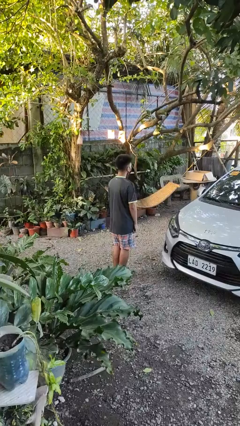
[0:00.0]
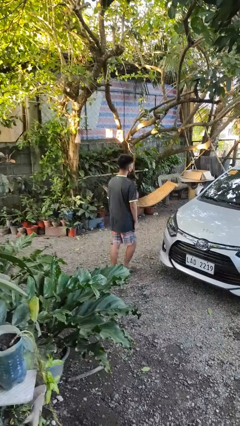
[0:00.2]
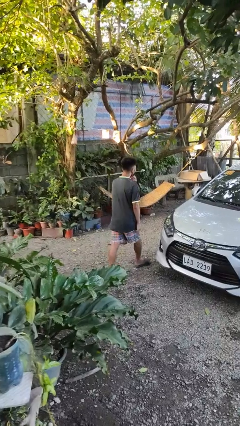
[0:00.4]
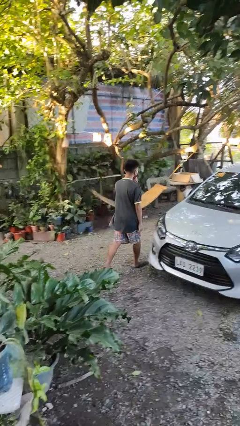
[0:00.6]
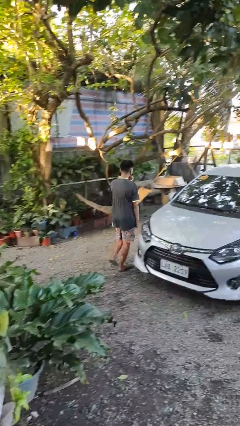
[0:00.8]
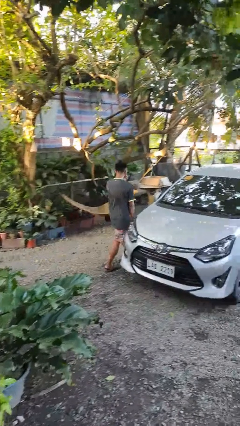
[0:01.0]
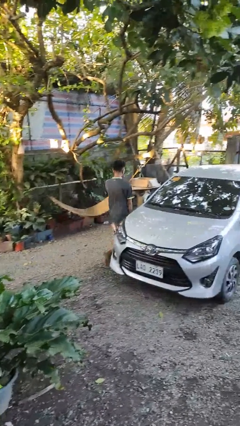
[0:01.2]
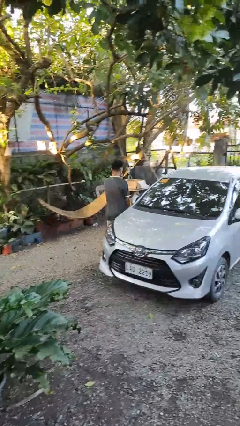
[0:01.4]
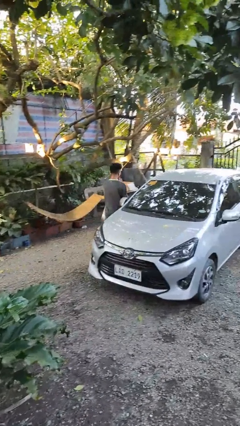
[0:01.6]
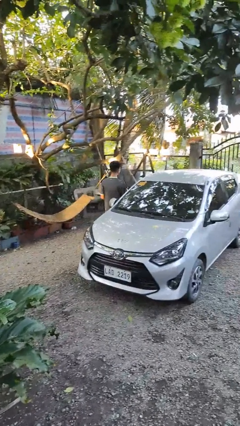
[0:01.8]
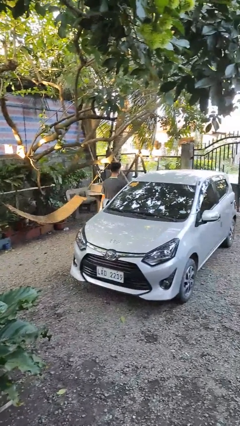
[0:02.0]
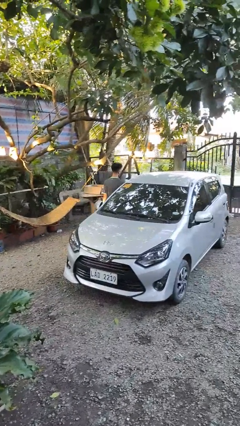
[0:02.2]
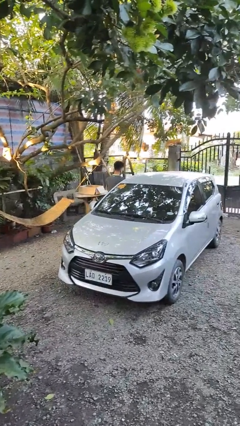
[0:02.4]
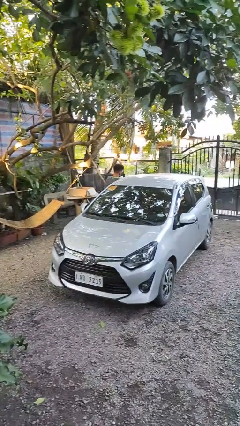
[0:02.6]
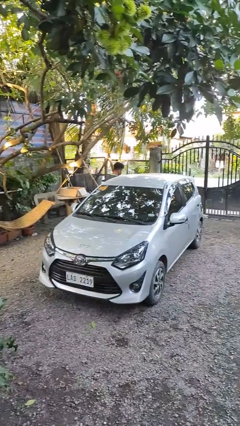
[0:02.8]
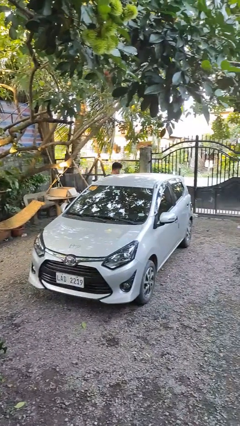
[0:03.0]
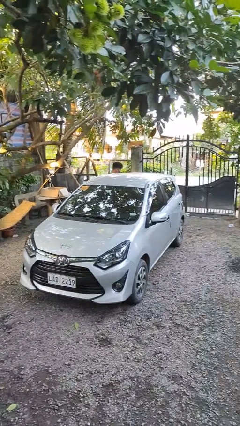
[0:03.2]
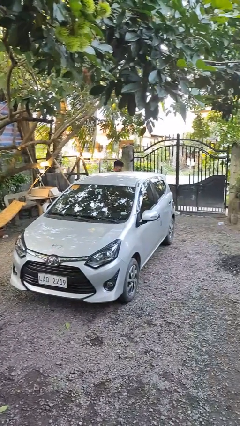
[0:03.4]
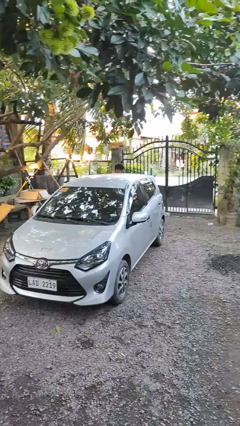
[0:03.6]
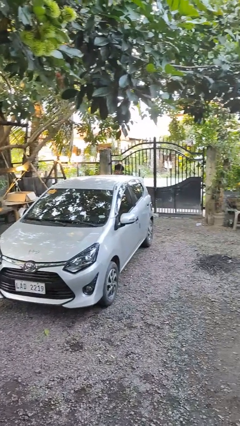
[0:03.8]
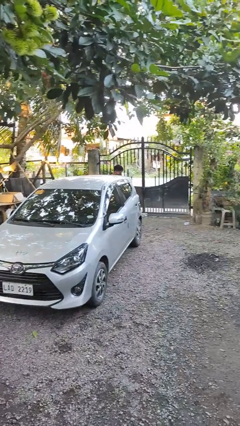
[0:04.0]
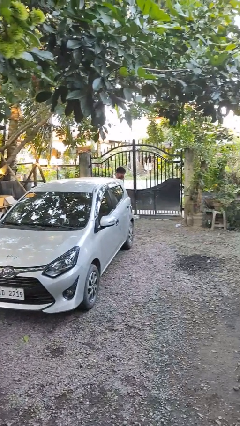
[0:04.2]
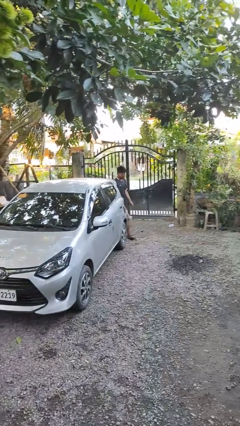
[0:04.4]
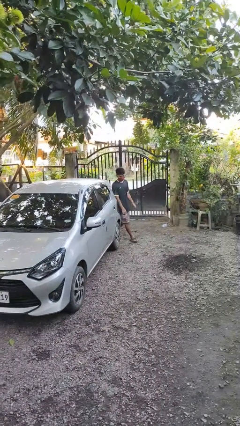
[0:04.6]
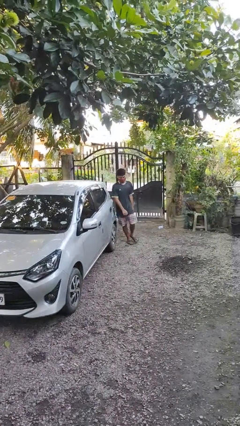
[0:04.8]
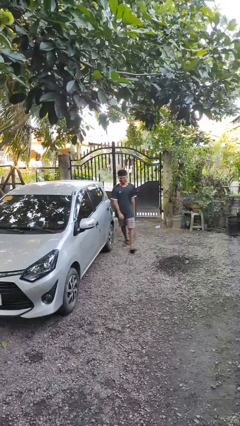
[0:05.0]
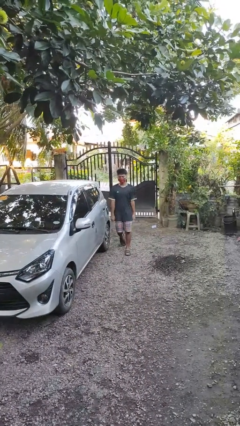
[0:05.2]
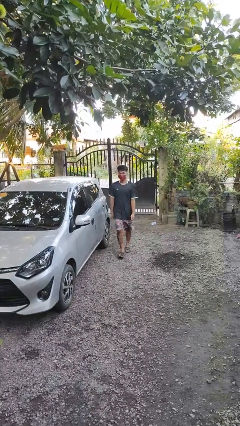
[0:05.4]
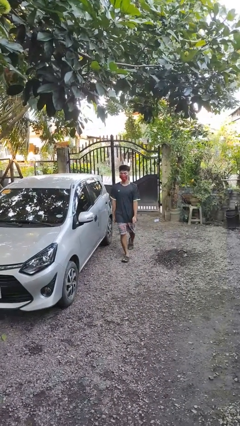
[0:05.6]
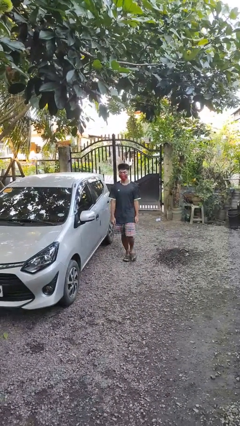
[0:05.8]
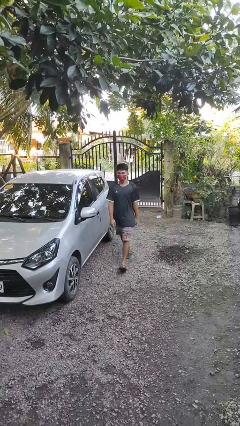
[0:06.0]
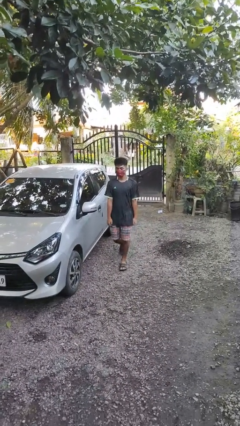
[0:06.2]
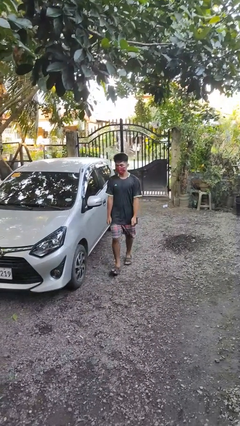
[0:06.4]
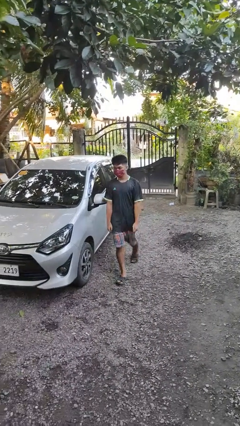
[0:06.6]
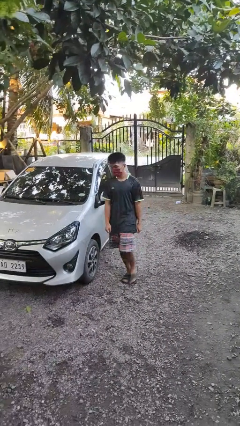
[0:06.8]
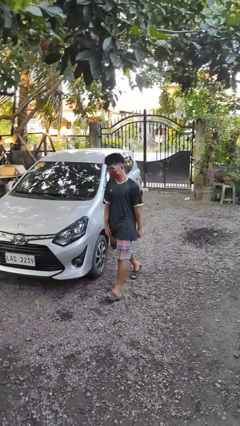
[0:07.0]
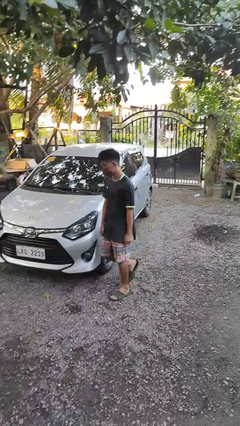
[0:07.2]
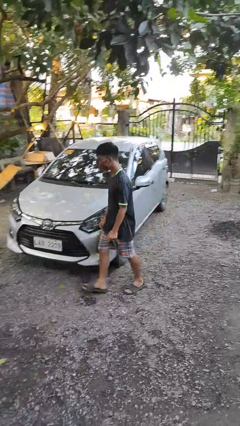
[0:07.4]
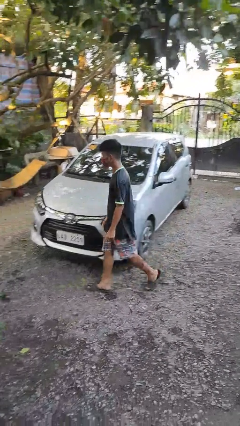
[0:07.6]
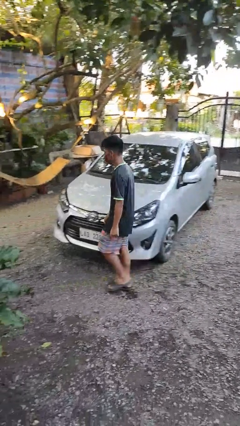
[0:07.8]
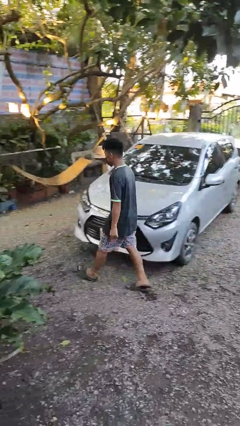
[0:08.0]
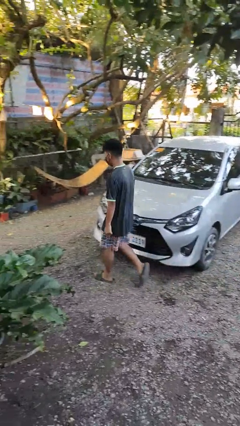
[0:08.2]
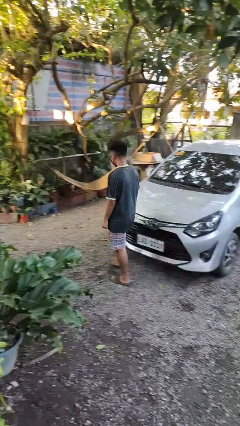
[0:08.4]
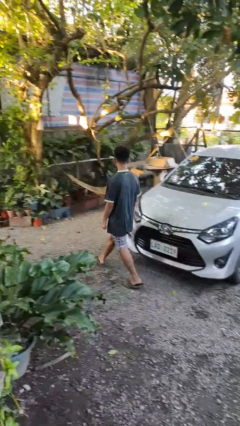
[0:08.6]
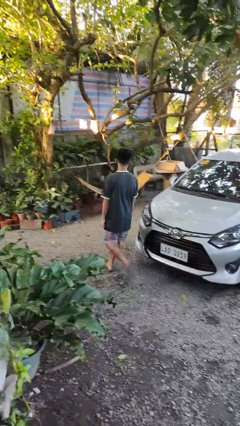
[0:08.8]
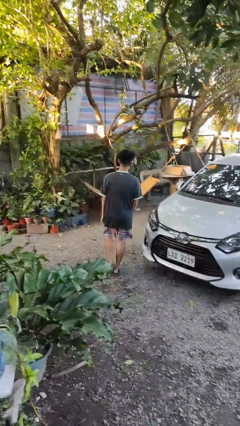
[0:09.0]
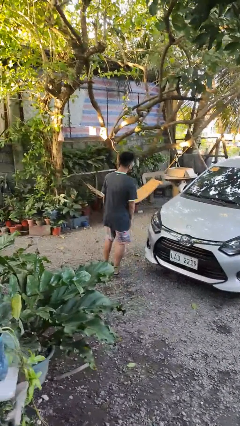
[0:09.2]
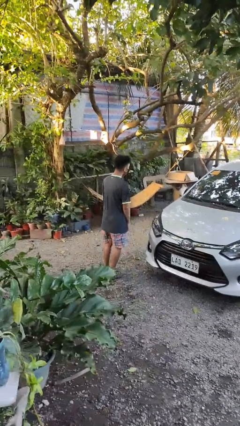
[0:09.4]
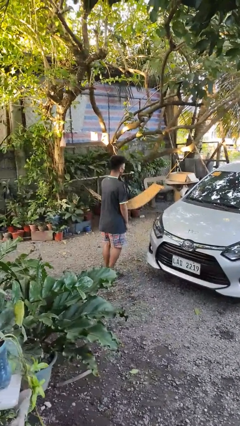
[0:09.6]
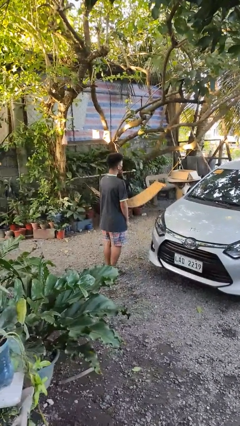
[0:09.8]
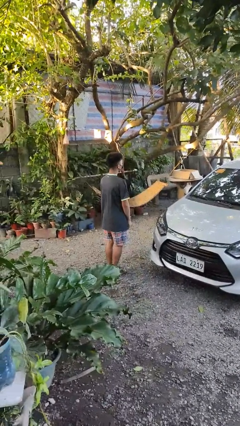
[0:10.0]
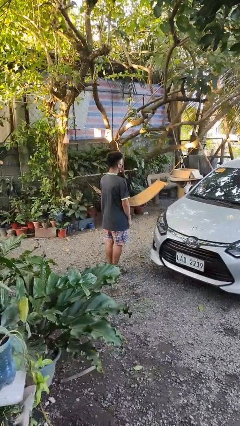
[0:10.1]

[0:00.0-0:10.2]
person walks around car

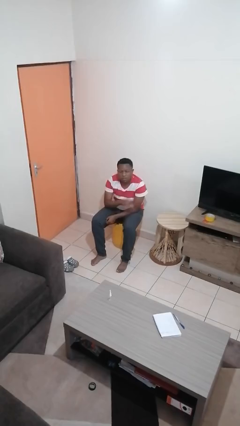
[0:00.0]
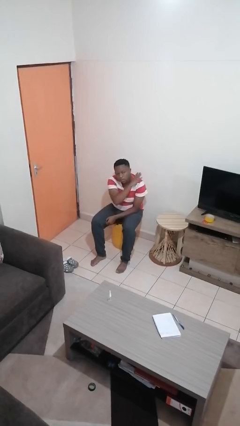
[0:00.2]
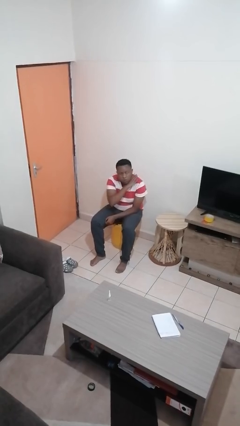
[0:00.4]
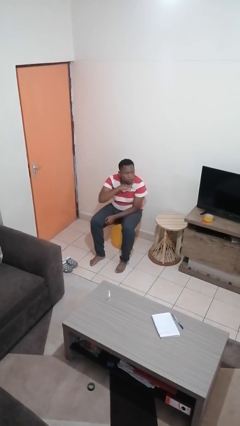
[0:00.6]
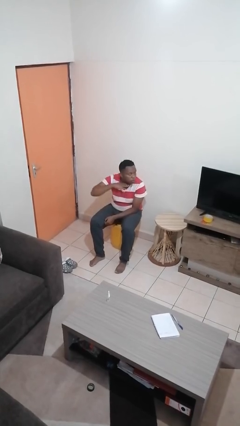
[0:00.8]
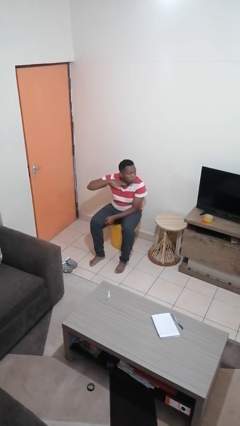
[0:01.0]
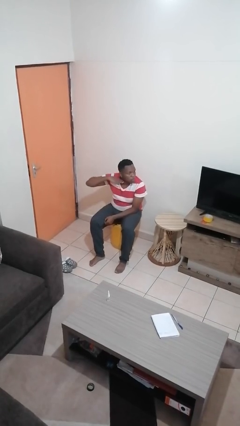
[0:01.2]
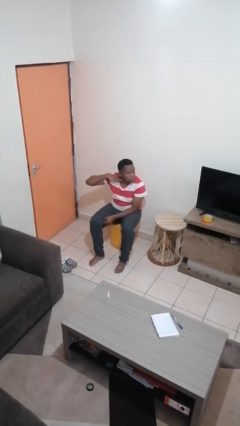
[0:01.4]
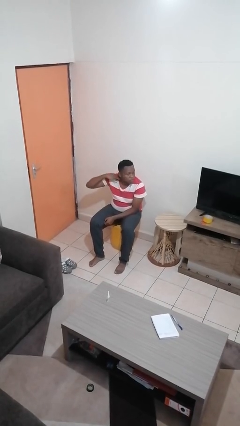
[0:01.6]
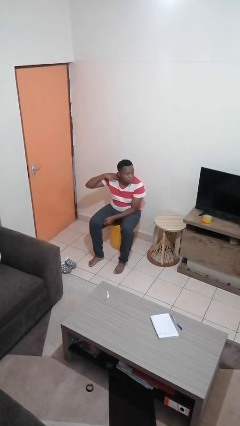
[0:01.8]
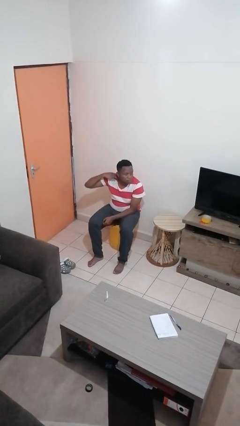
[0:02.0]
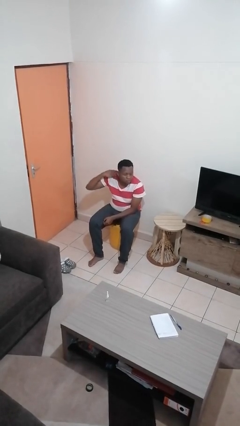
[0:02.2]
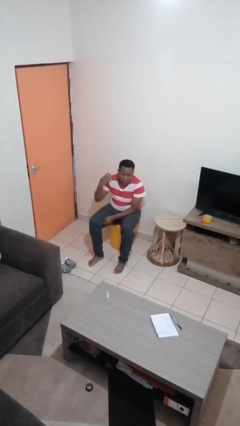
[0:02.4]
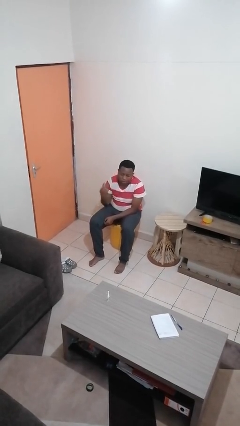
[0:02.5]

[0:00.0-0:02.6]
person gestures cut

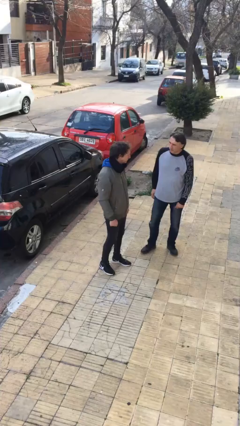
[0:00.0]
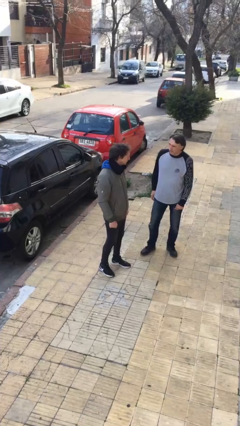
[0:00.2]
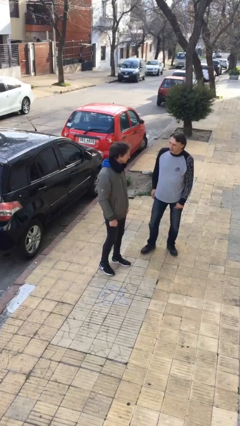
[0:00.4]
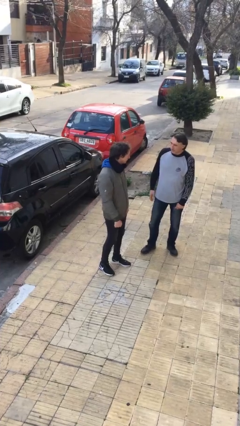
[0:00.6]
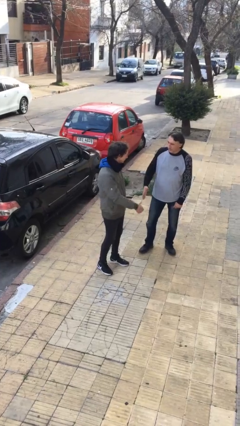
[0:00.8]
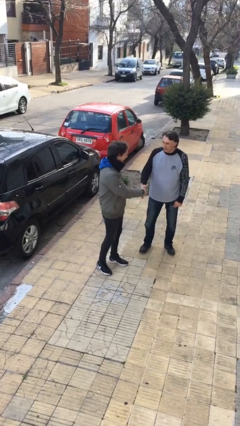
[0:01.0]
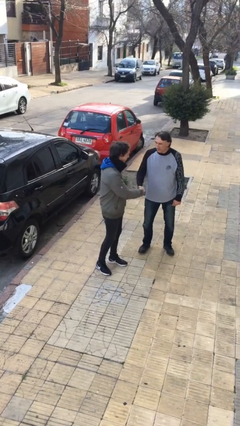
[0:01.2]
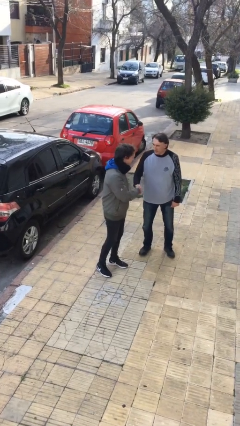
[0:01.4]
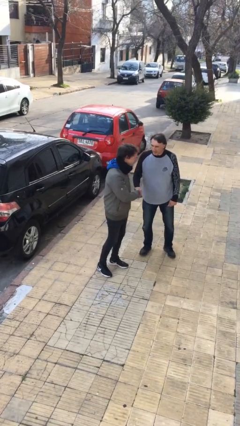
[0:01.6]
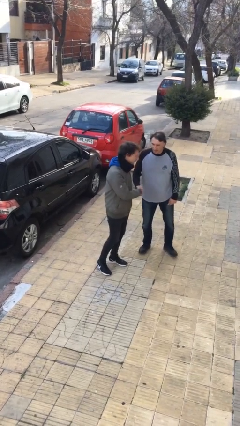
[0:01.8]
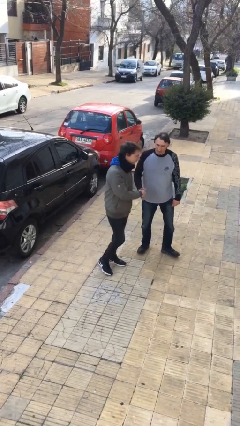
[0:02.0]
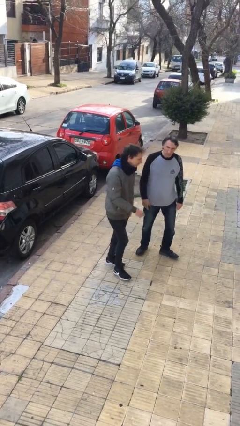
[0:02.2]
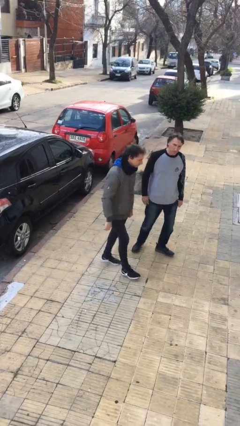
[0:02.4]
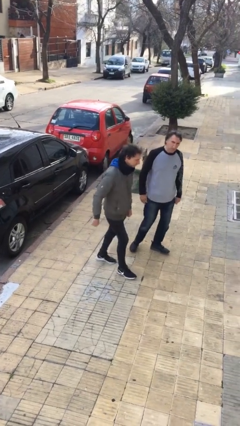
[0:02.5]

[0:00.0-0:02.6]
person shakes hand

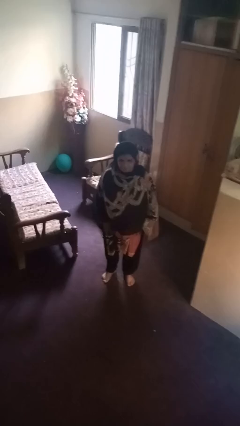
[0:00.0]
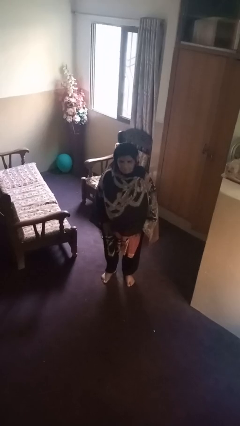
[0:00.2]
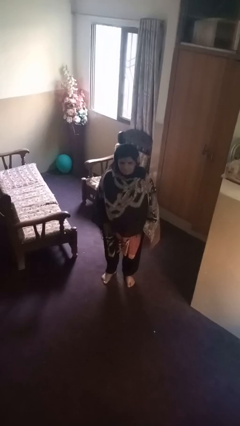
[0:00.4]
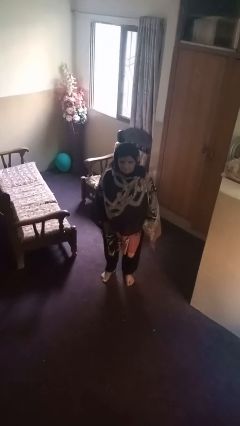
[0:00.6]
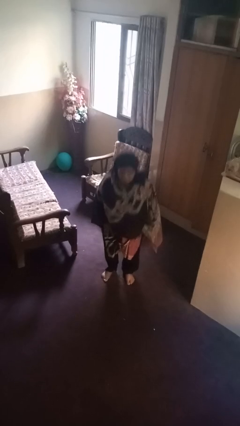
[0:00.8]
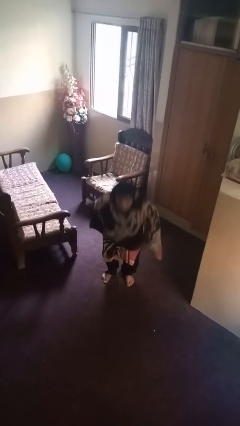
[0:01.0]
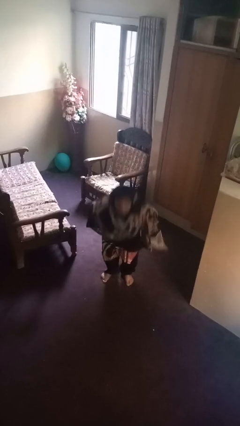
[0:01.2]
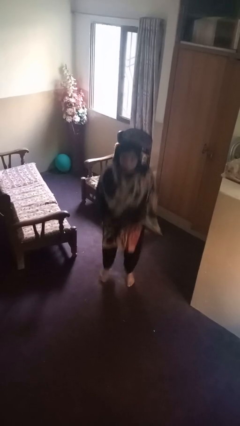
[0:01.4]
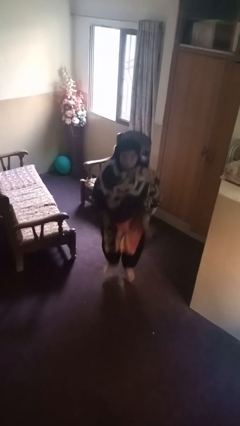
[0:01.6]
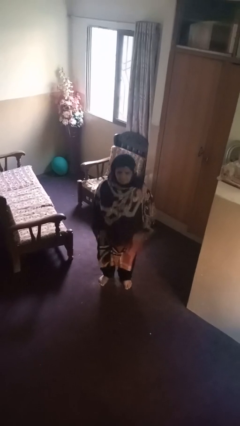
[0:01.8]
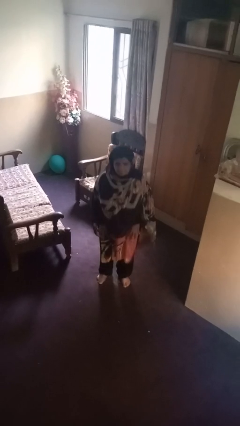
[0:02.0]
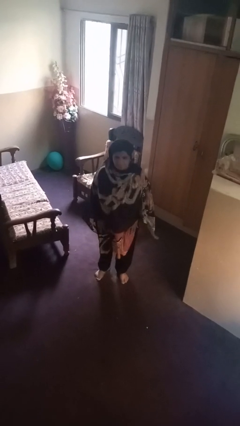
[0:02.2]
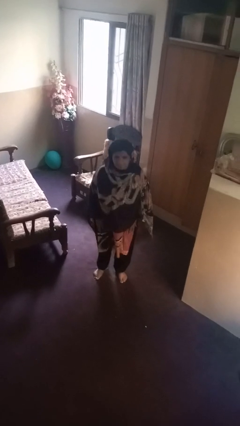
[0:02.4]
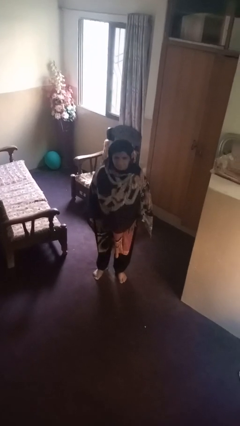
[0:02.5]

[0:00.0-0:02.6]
person jumps
